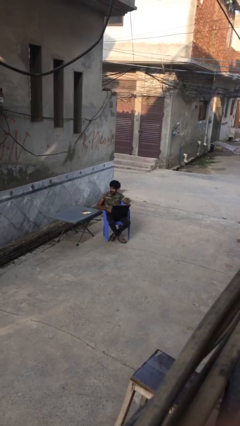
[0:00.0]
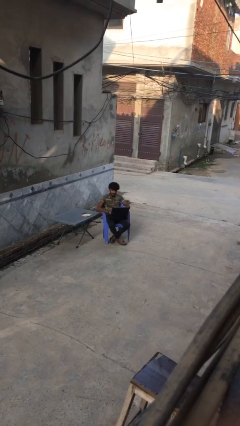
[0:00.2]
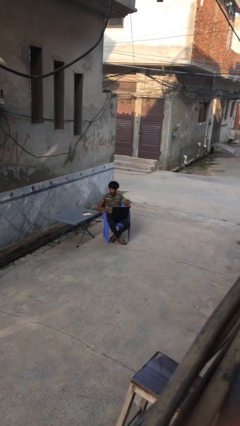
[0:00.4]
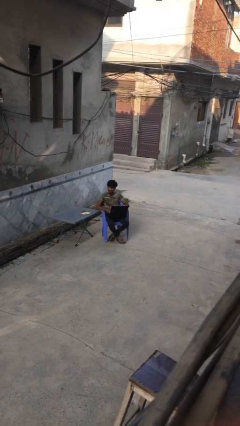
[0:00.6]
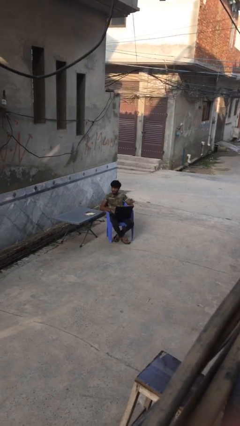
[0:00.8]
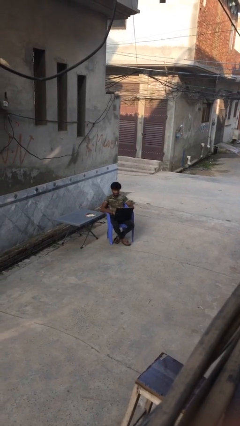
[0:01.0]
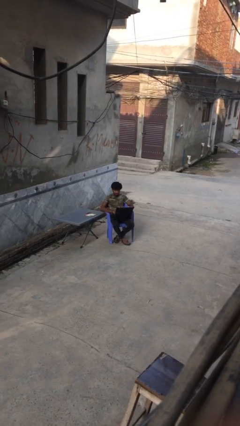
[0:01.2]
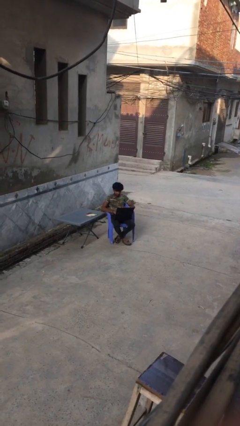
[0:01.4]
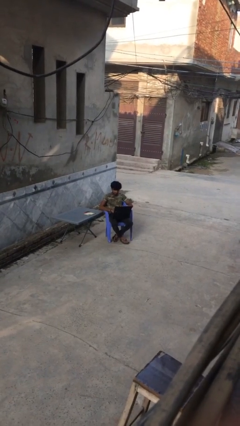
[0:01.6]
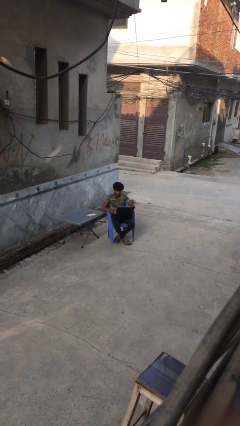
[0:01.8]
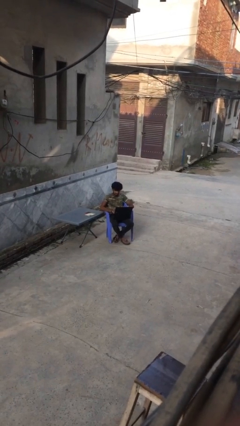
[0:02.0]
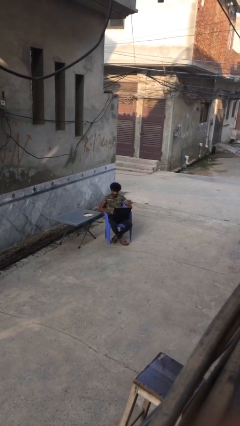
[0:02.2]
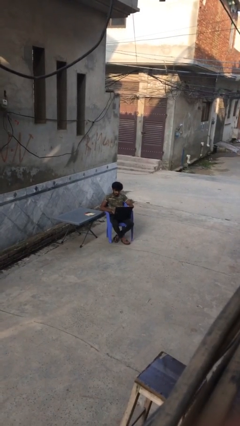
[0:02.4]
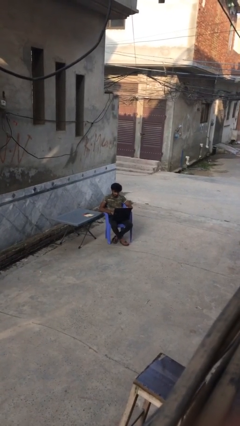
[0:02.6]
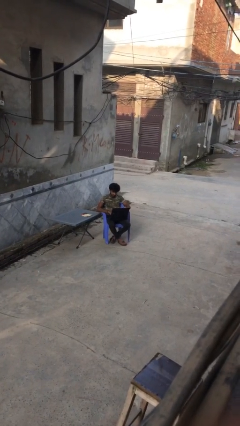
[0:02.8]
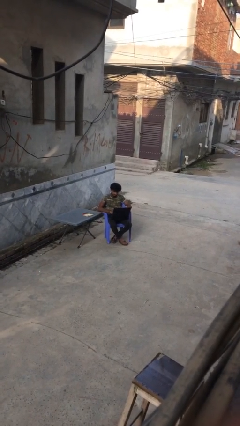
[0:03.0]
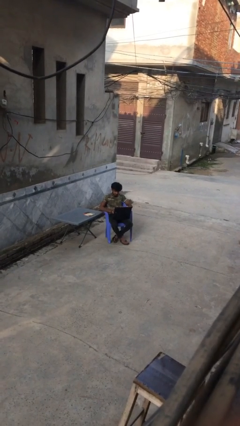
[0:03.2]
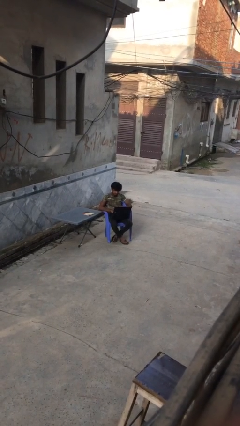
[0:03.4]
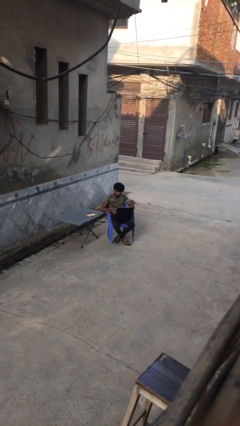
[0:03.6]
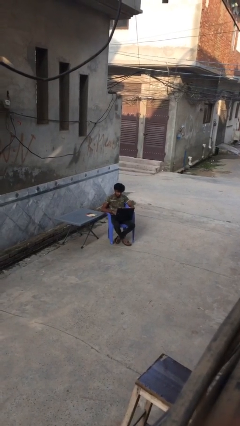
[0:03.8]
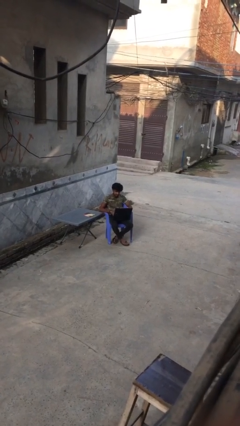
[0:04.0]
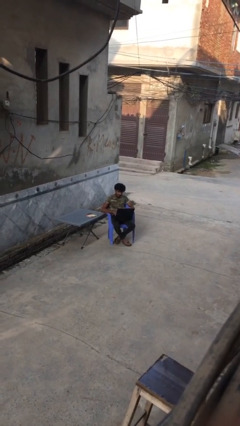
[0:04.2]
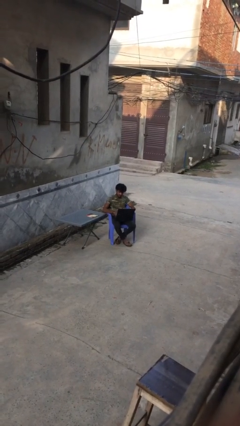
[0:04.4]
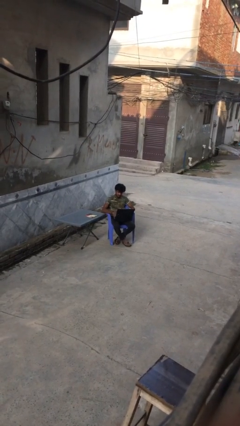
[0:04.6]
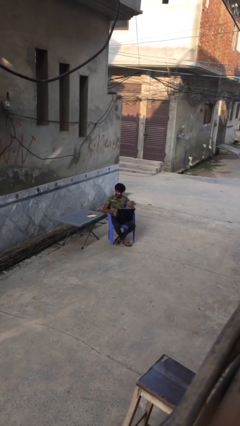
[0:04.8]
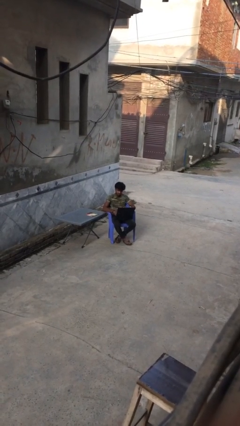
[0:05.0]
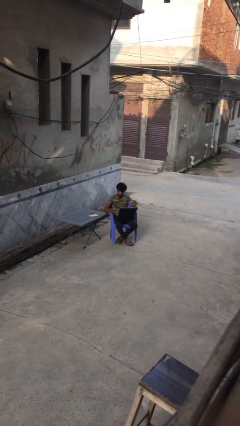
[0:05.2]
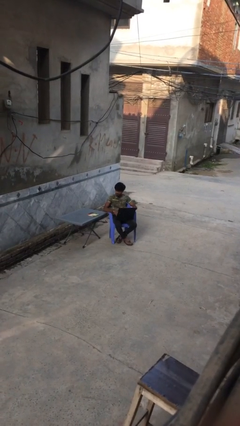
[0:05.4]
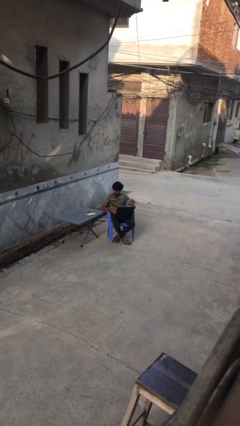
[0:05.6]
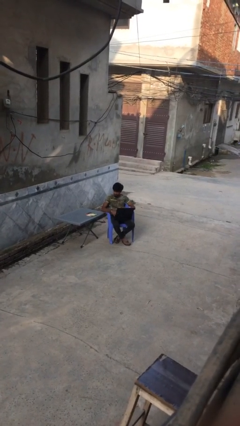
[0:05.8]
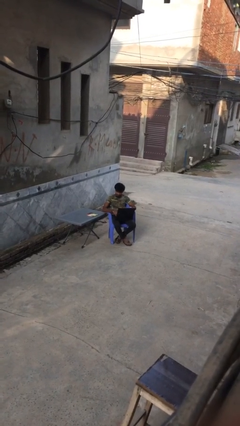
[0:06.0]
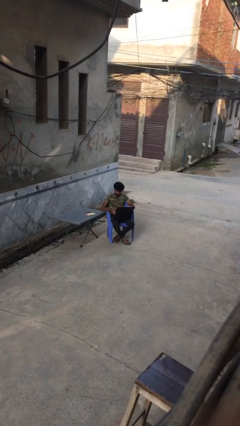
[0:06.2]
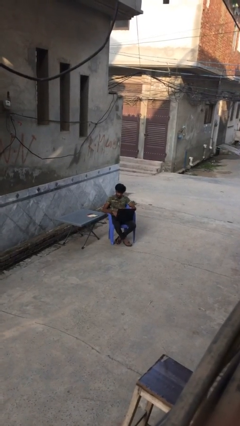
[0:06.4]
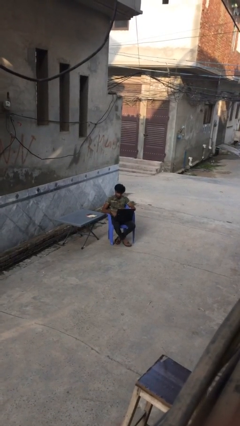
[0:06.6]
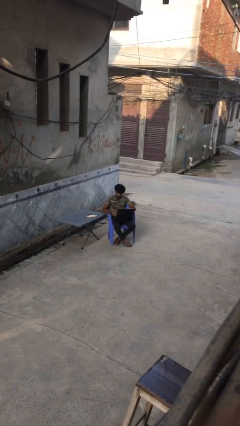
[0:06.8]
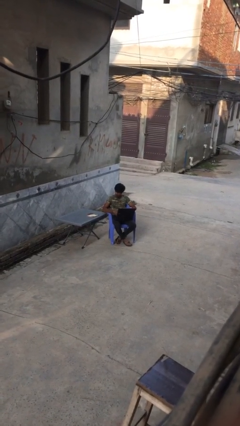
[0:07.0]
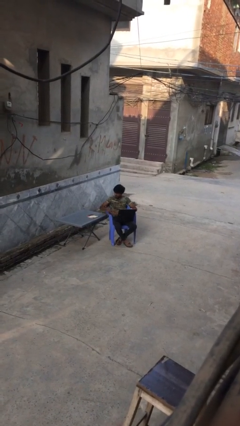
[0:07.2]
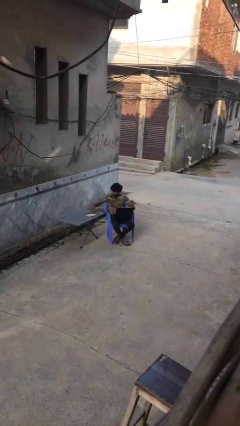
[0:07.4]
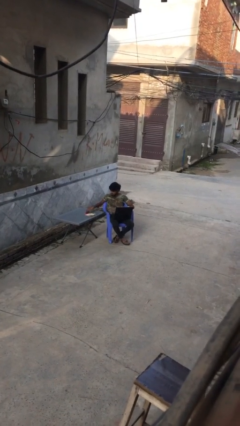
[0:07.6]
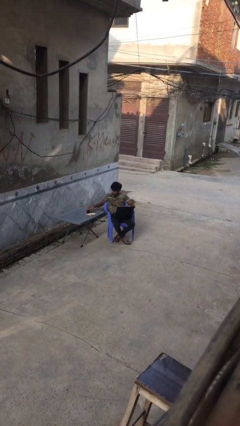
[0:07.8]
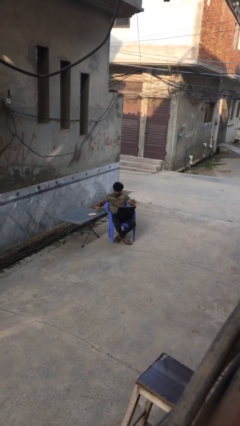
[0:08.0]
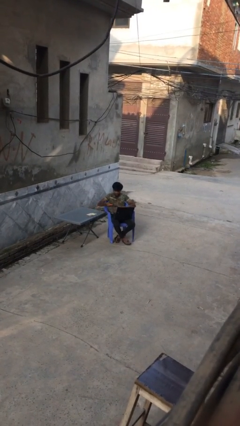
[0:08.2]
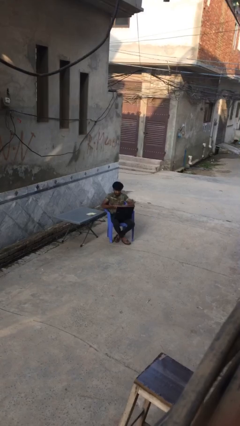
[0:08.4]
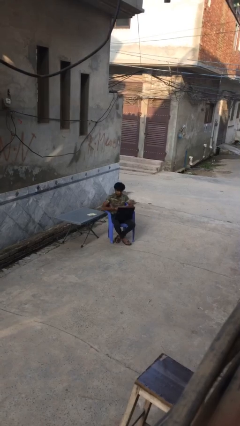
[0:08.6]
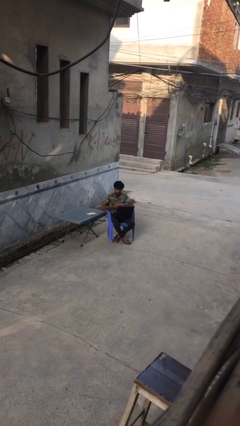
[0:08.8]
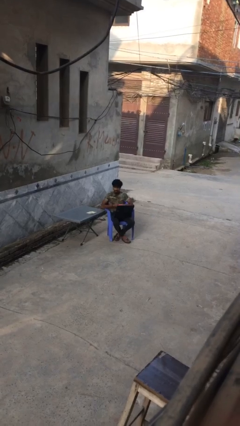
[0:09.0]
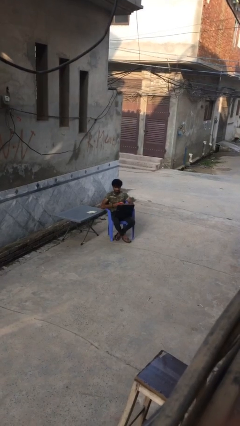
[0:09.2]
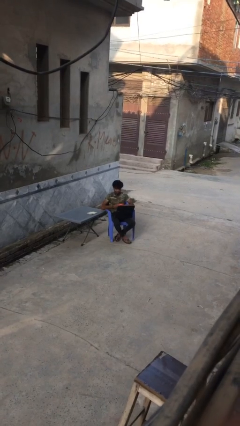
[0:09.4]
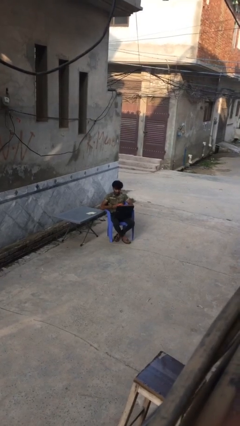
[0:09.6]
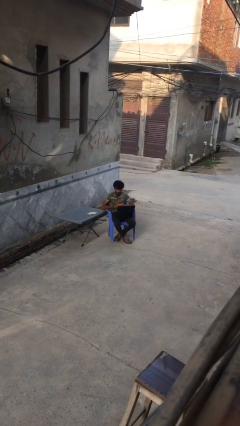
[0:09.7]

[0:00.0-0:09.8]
person interacts with laptop

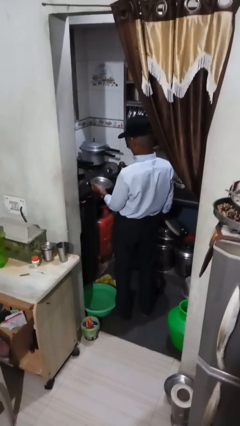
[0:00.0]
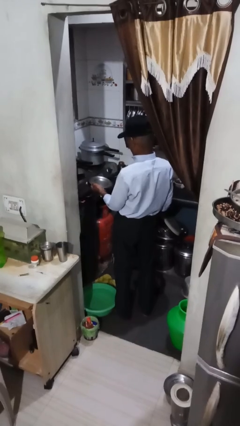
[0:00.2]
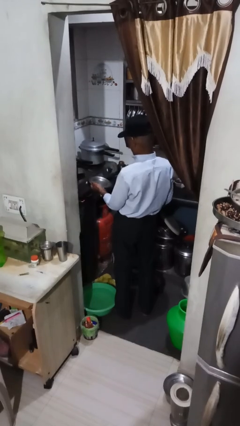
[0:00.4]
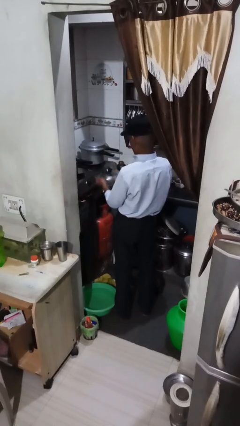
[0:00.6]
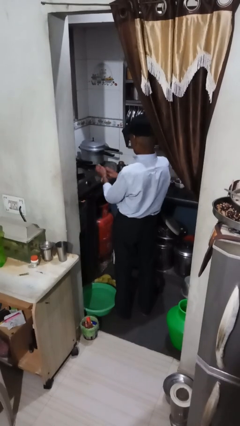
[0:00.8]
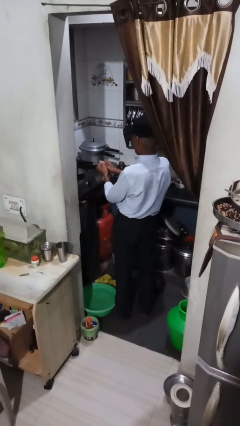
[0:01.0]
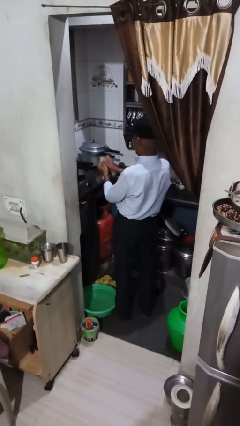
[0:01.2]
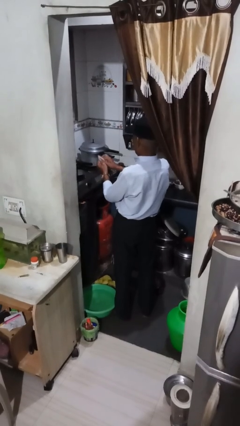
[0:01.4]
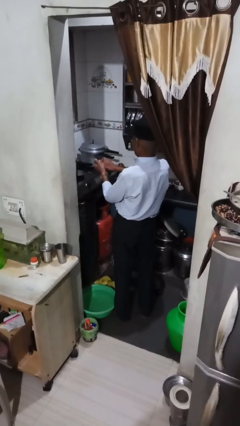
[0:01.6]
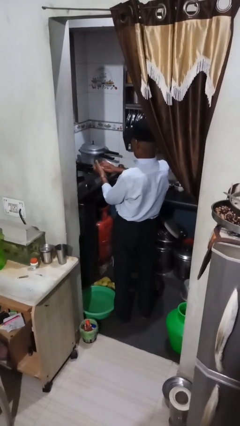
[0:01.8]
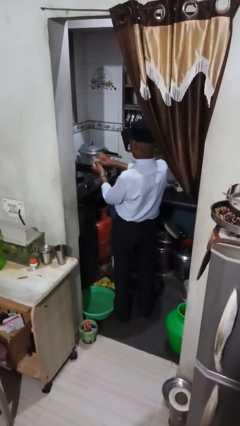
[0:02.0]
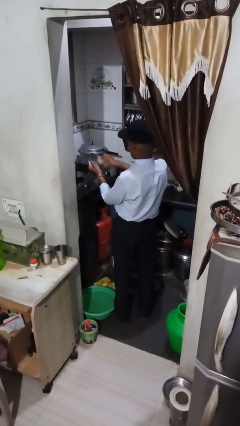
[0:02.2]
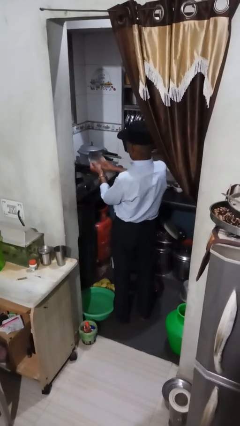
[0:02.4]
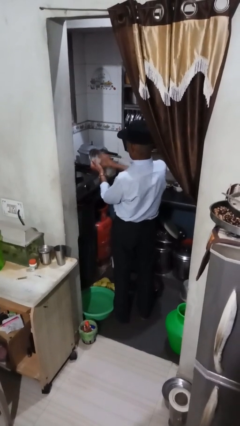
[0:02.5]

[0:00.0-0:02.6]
person dries dish

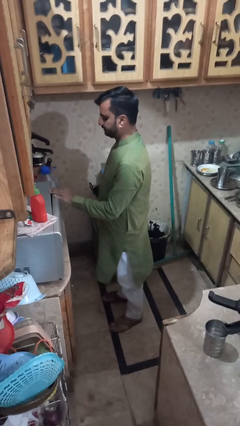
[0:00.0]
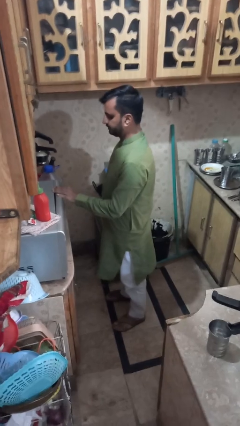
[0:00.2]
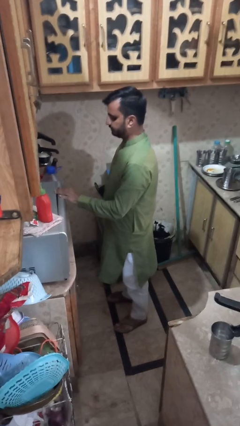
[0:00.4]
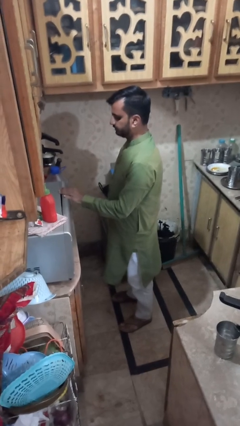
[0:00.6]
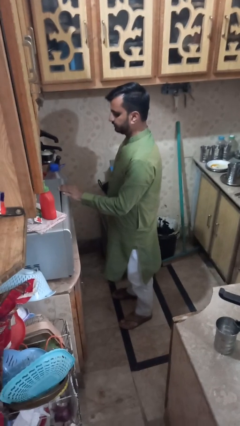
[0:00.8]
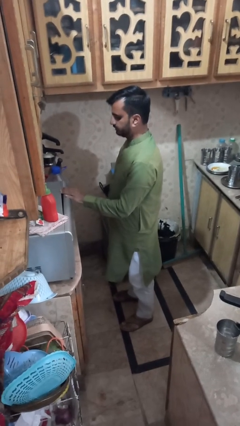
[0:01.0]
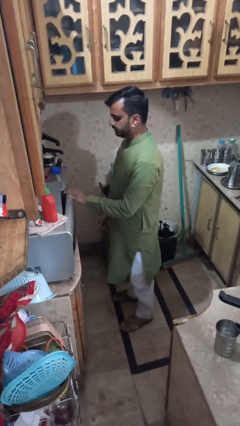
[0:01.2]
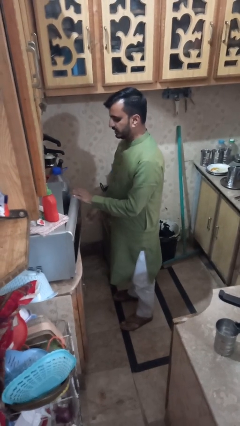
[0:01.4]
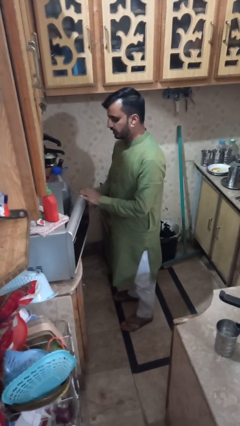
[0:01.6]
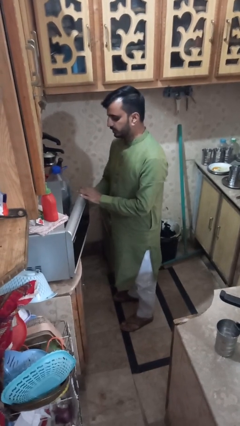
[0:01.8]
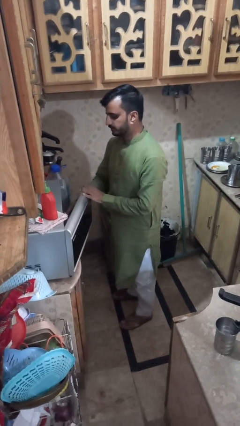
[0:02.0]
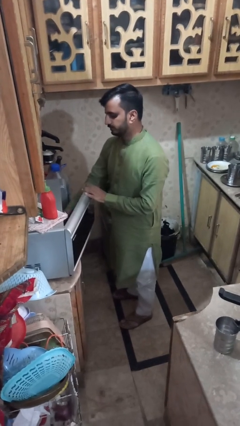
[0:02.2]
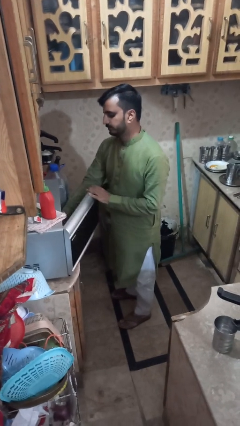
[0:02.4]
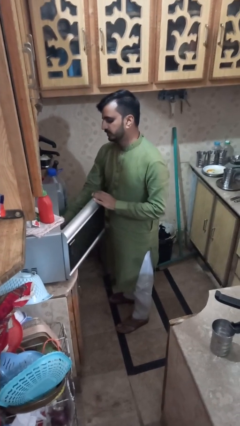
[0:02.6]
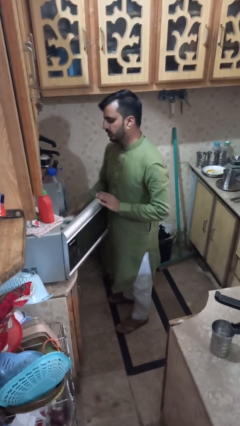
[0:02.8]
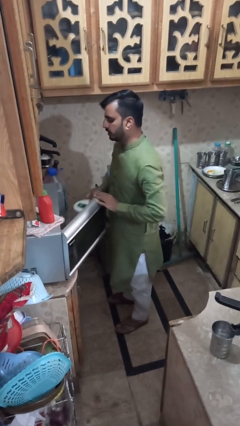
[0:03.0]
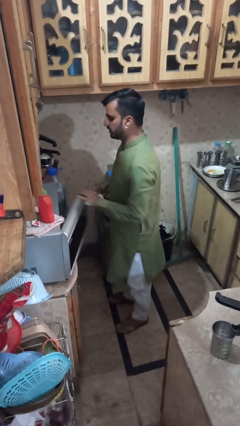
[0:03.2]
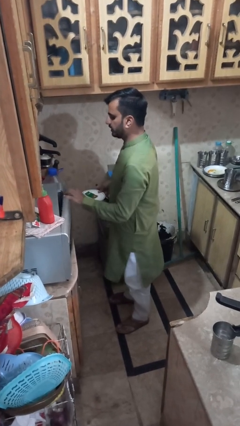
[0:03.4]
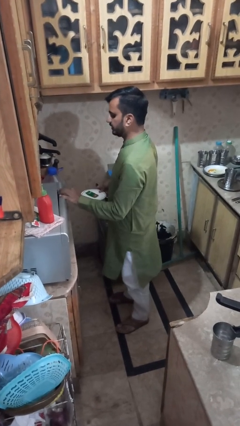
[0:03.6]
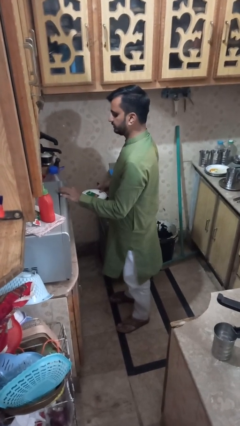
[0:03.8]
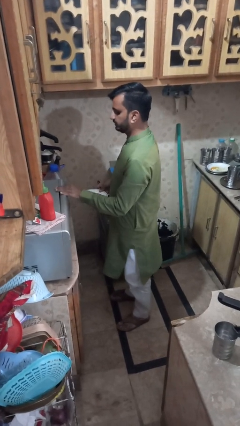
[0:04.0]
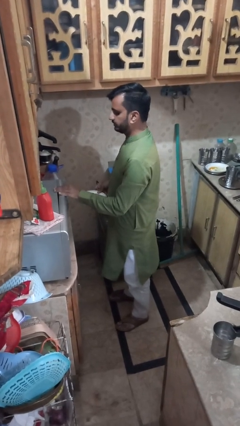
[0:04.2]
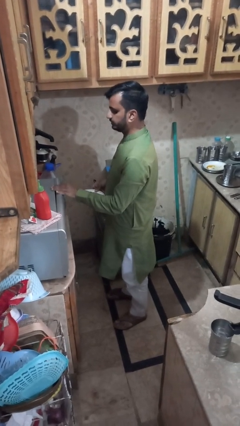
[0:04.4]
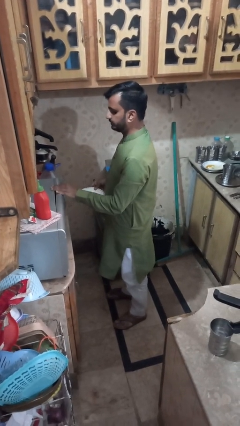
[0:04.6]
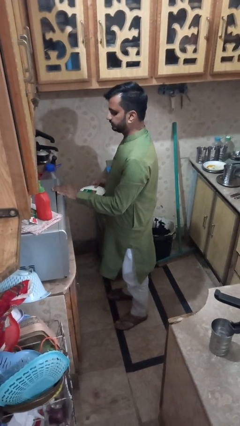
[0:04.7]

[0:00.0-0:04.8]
person takes object from microwave

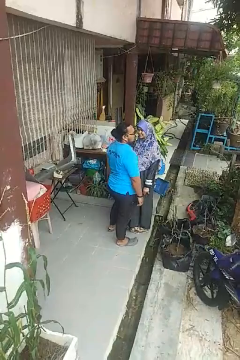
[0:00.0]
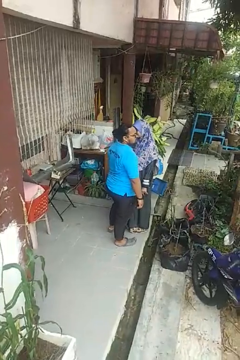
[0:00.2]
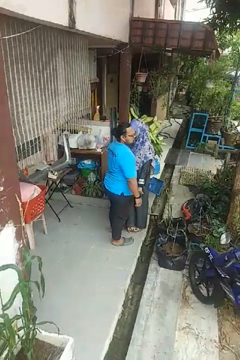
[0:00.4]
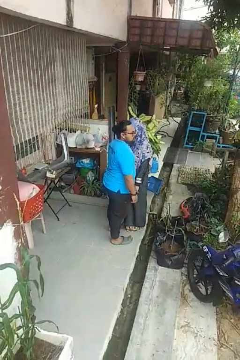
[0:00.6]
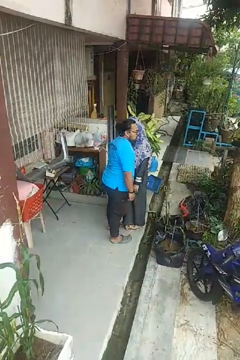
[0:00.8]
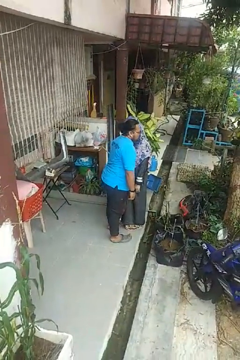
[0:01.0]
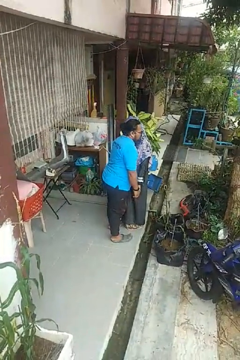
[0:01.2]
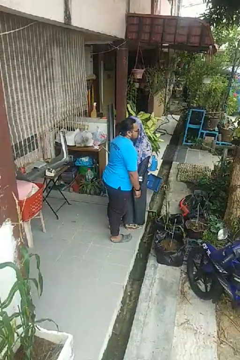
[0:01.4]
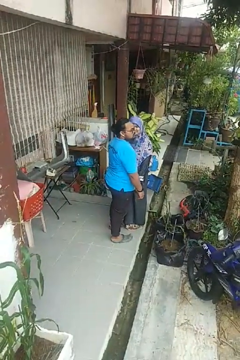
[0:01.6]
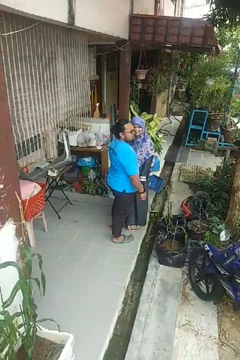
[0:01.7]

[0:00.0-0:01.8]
person kisses cheek of person
